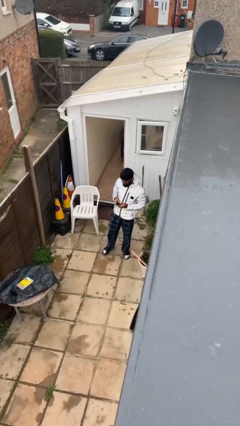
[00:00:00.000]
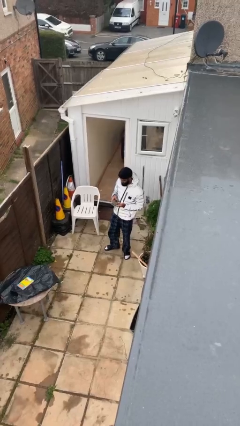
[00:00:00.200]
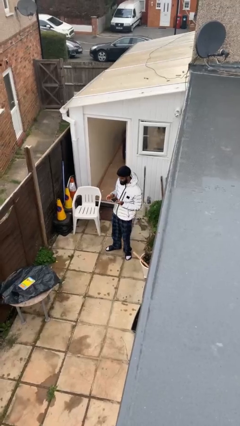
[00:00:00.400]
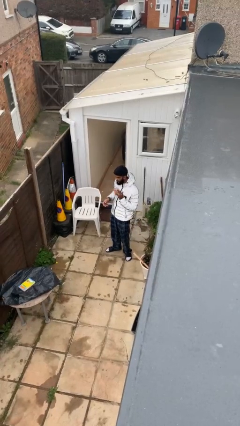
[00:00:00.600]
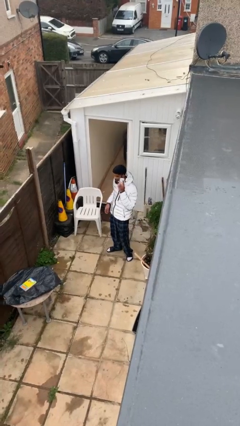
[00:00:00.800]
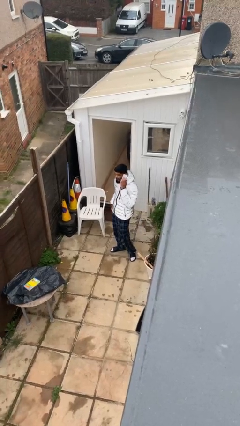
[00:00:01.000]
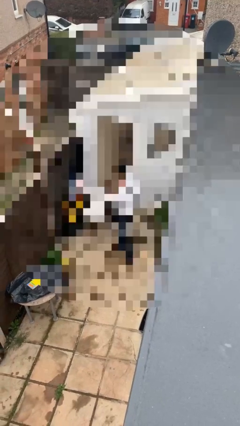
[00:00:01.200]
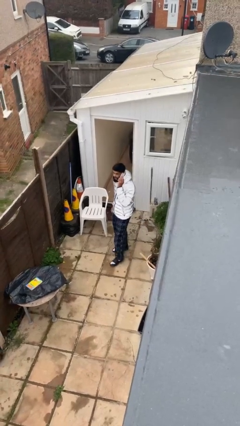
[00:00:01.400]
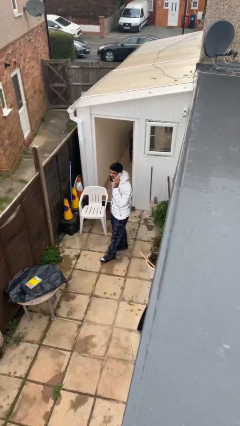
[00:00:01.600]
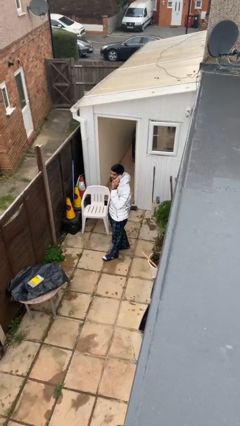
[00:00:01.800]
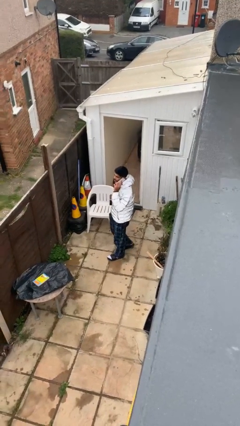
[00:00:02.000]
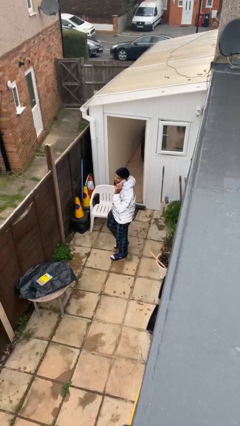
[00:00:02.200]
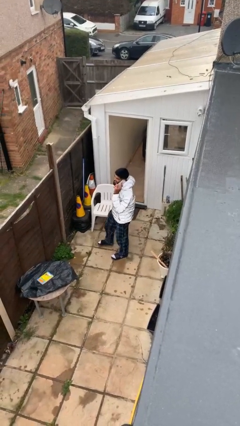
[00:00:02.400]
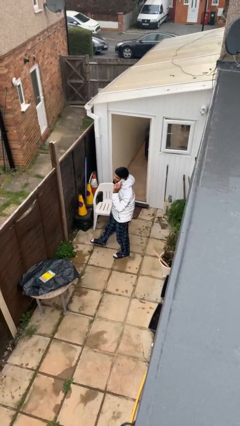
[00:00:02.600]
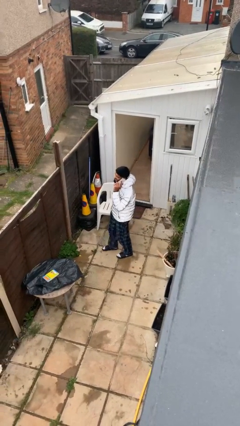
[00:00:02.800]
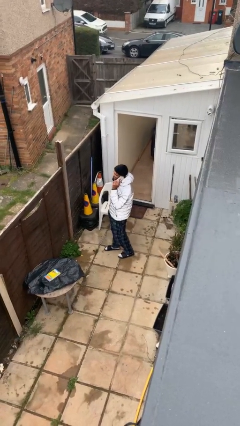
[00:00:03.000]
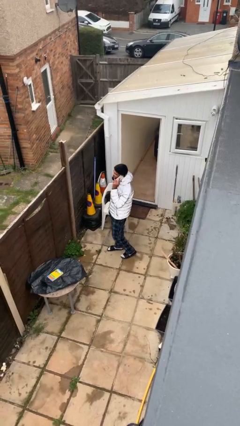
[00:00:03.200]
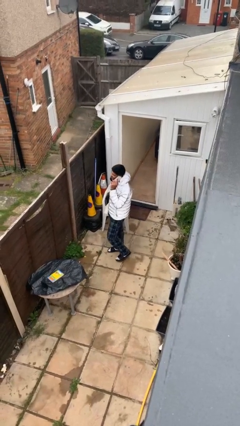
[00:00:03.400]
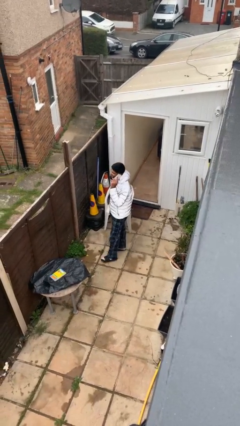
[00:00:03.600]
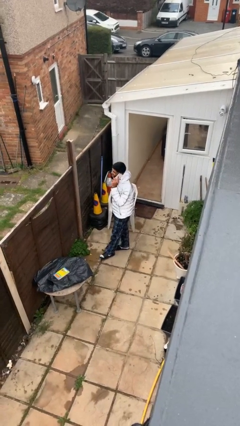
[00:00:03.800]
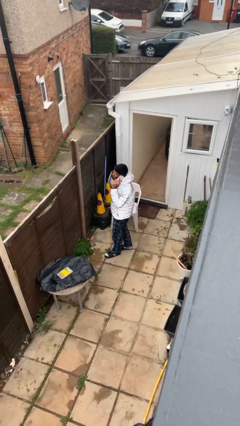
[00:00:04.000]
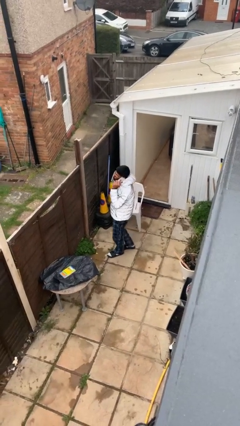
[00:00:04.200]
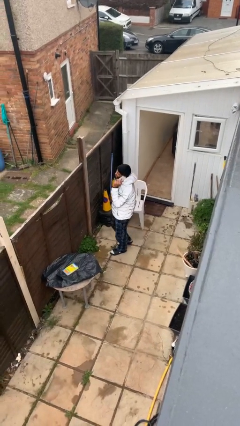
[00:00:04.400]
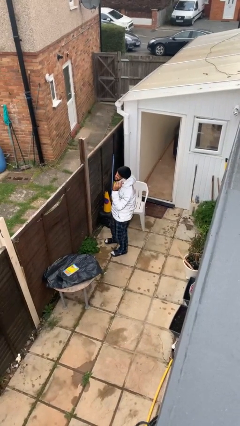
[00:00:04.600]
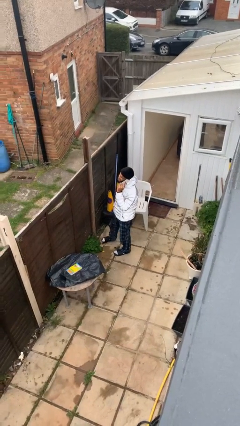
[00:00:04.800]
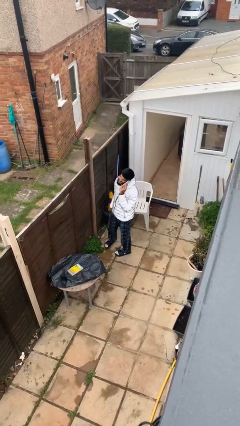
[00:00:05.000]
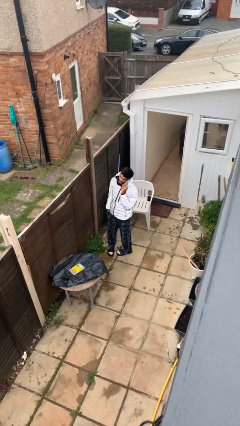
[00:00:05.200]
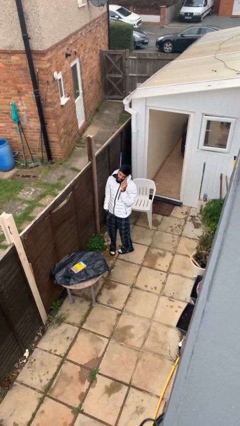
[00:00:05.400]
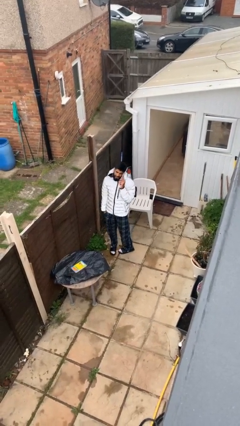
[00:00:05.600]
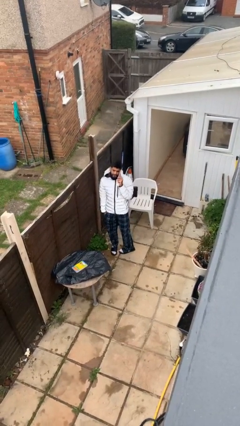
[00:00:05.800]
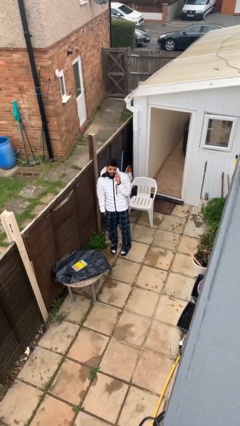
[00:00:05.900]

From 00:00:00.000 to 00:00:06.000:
person talks on phone

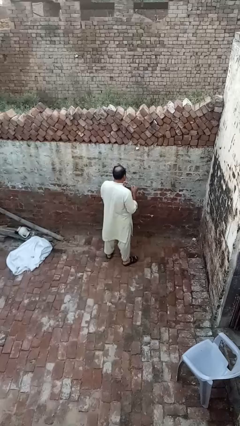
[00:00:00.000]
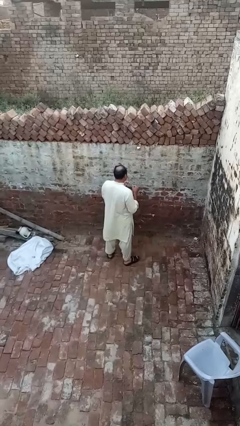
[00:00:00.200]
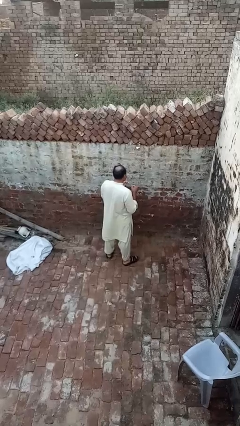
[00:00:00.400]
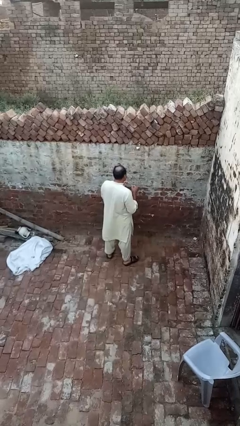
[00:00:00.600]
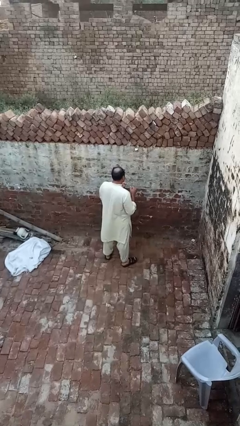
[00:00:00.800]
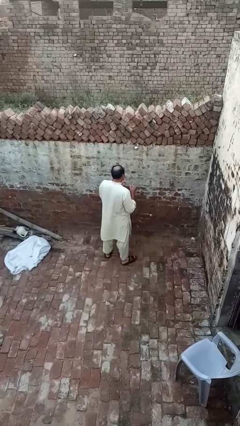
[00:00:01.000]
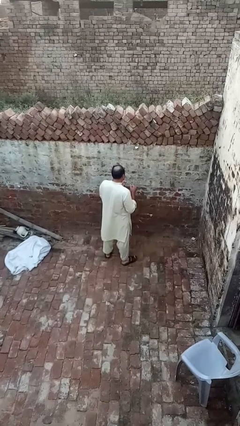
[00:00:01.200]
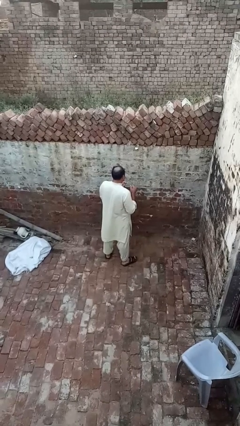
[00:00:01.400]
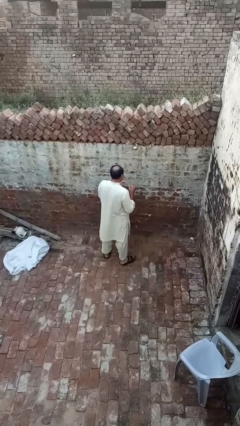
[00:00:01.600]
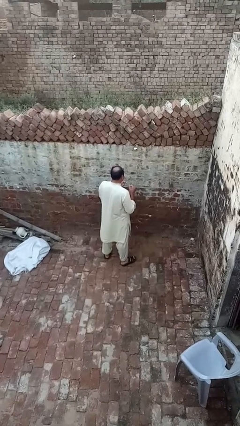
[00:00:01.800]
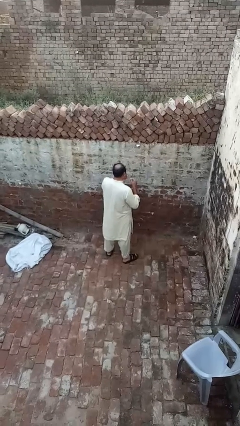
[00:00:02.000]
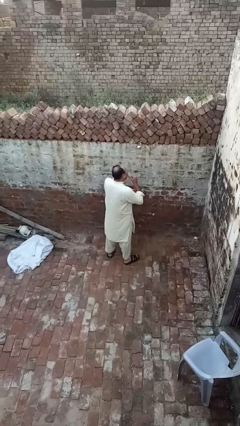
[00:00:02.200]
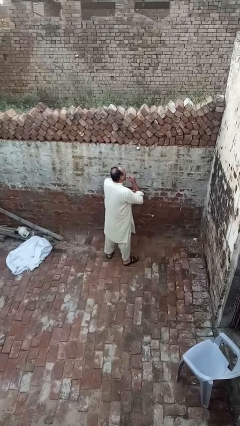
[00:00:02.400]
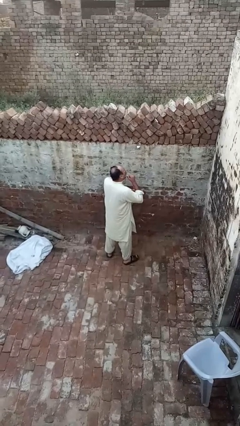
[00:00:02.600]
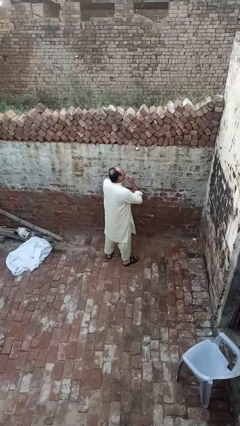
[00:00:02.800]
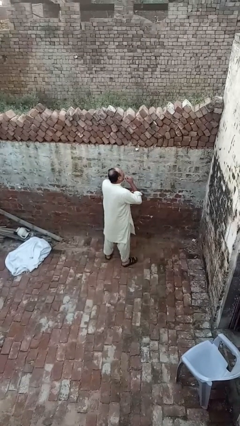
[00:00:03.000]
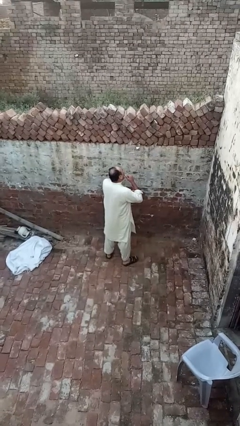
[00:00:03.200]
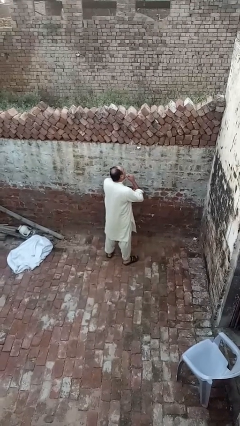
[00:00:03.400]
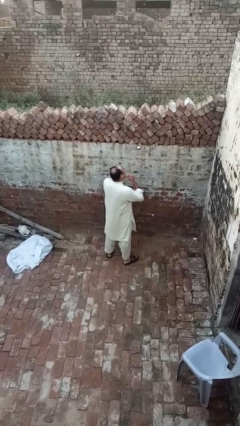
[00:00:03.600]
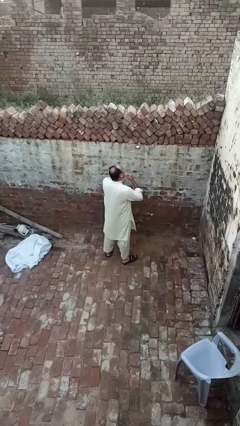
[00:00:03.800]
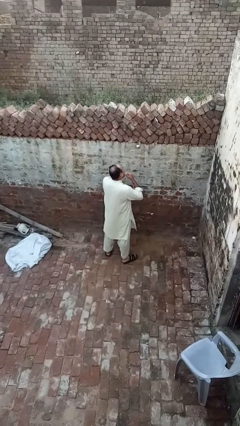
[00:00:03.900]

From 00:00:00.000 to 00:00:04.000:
person flosses

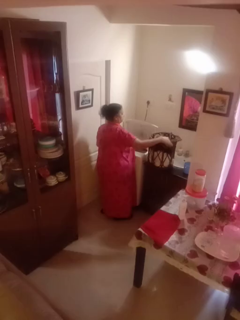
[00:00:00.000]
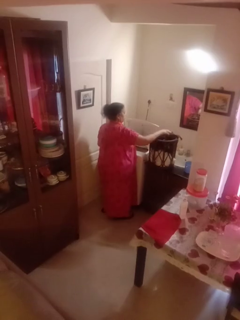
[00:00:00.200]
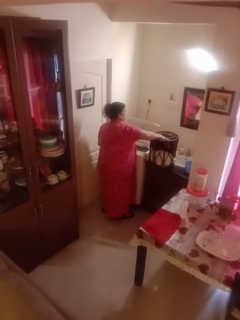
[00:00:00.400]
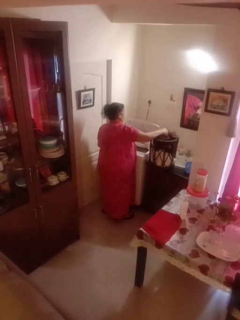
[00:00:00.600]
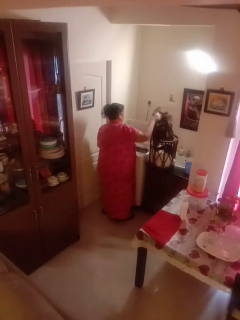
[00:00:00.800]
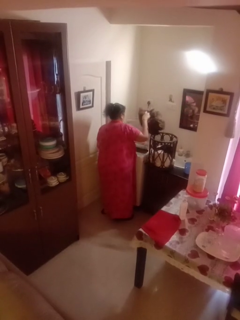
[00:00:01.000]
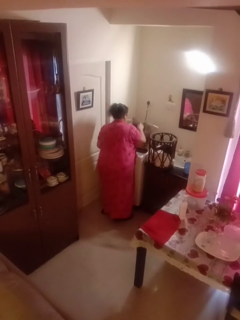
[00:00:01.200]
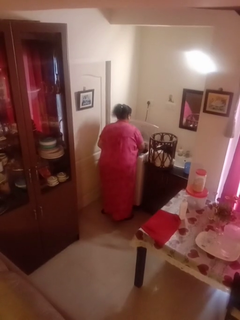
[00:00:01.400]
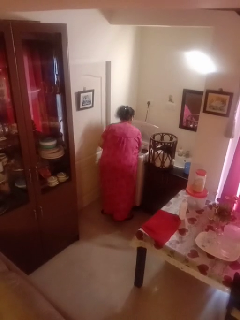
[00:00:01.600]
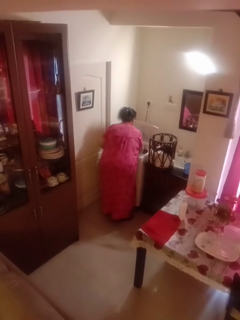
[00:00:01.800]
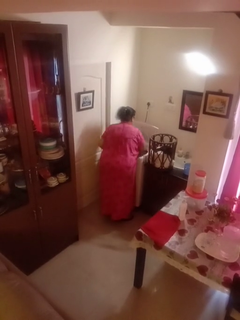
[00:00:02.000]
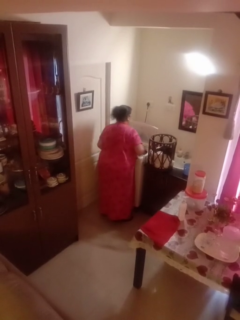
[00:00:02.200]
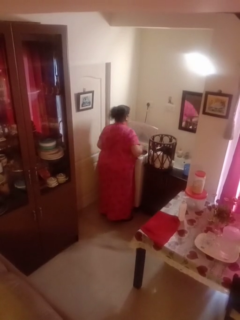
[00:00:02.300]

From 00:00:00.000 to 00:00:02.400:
person loads clotheswasher

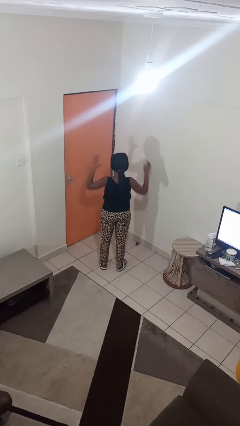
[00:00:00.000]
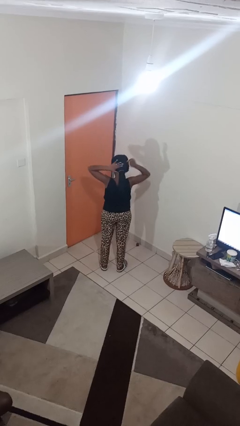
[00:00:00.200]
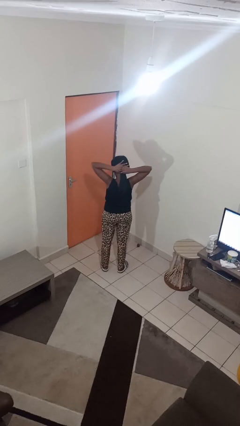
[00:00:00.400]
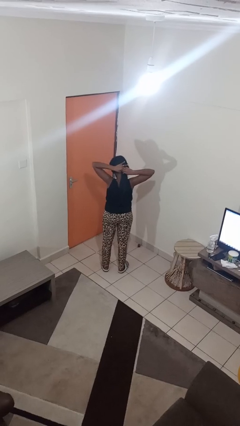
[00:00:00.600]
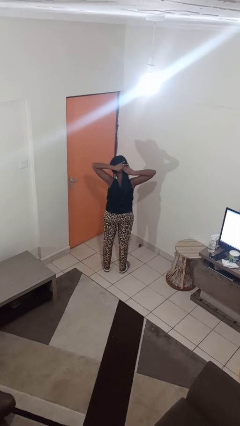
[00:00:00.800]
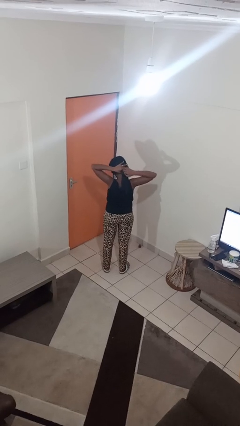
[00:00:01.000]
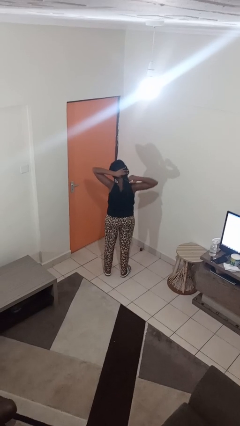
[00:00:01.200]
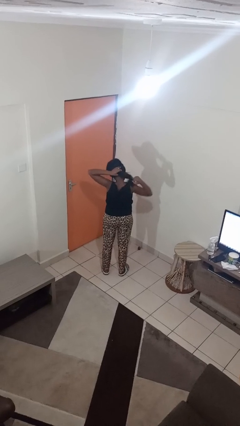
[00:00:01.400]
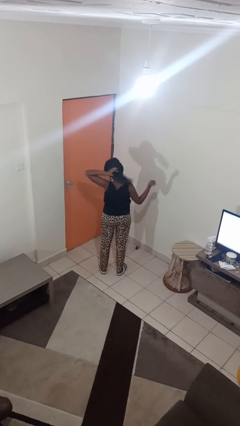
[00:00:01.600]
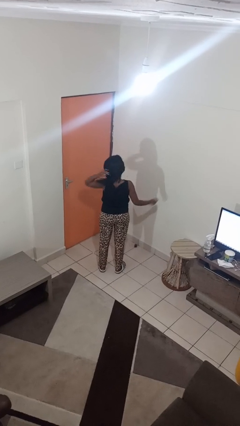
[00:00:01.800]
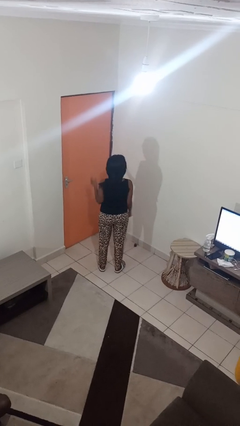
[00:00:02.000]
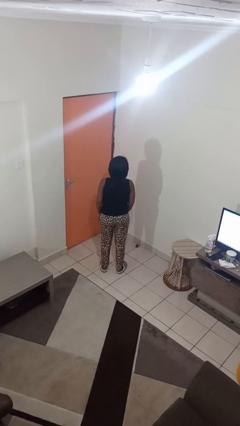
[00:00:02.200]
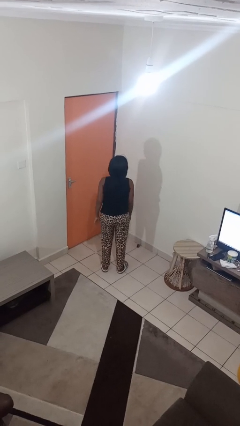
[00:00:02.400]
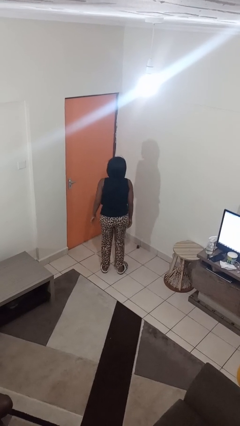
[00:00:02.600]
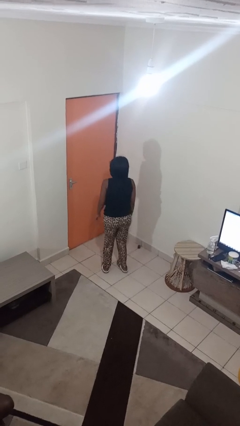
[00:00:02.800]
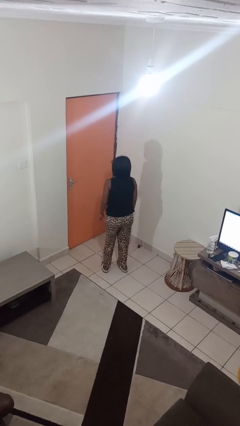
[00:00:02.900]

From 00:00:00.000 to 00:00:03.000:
person takes off hairtie

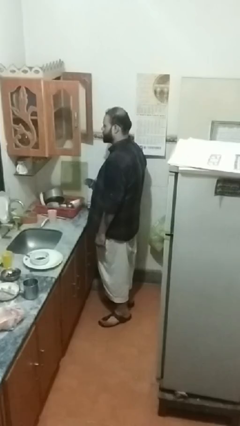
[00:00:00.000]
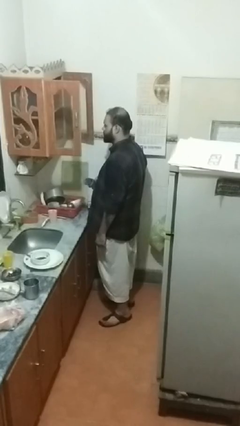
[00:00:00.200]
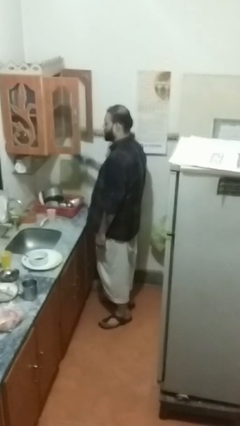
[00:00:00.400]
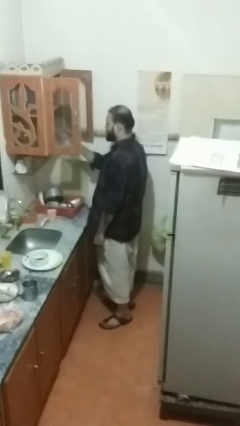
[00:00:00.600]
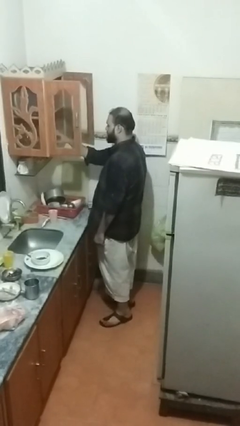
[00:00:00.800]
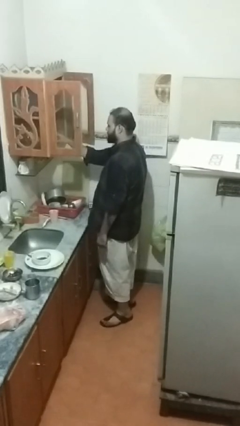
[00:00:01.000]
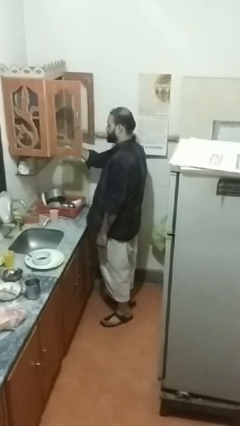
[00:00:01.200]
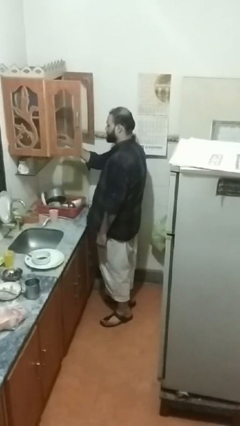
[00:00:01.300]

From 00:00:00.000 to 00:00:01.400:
person puts object in cabinet

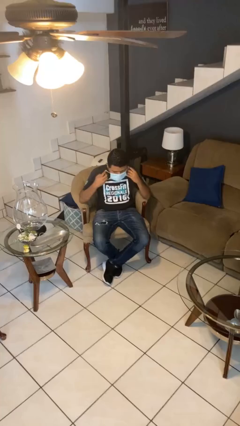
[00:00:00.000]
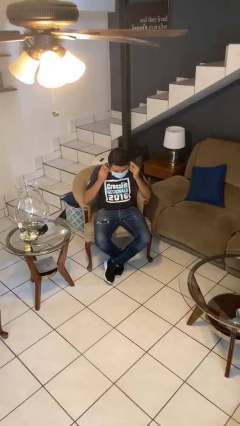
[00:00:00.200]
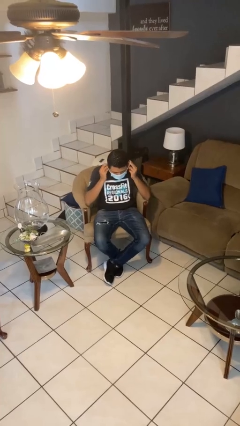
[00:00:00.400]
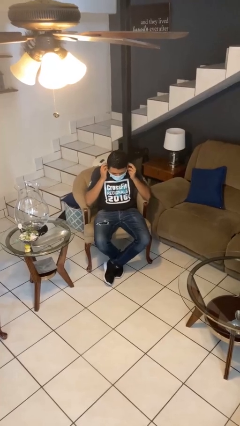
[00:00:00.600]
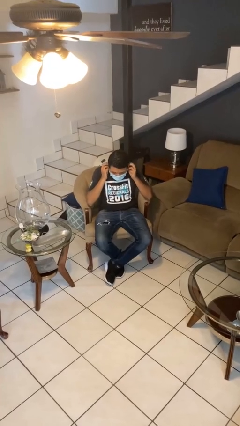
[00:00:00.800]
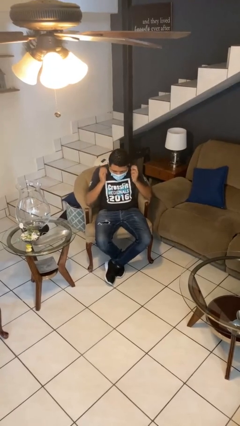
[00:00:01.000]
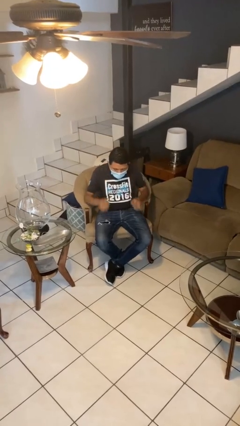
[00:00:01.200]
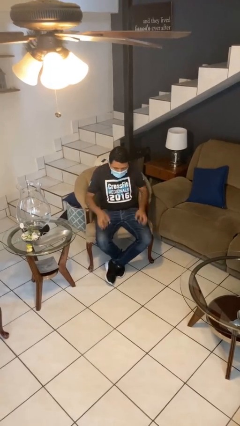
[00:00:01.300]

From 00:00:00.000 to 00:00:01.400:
person puts on facemask
